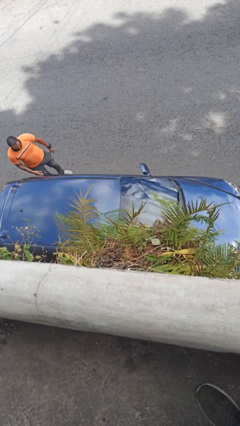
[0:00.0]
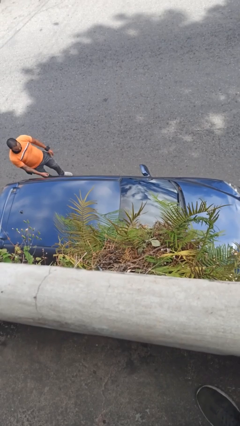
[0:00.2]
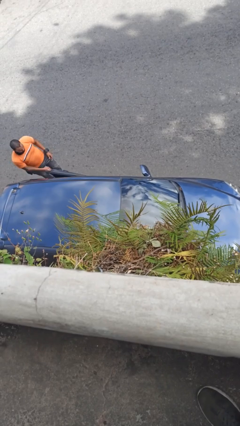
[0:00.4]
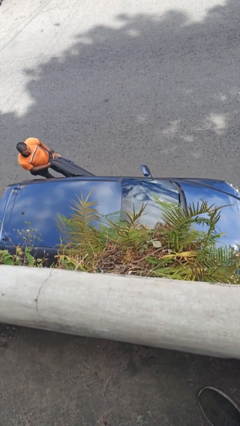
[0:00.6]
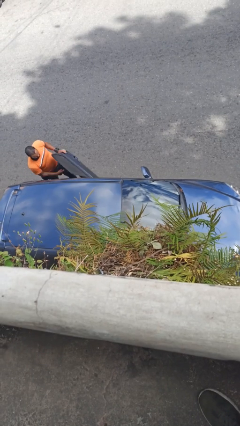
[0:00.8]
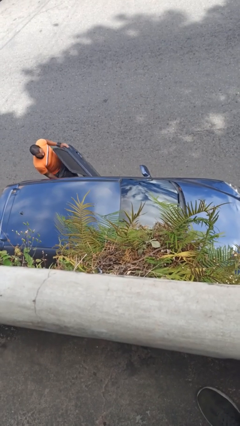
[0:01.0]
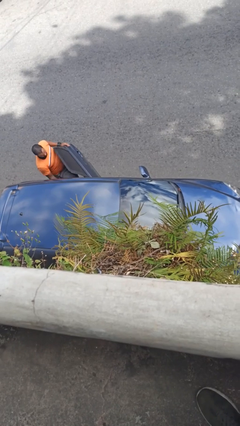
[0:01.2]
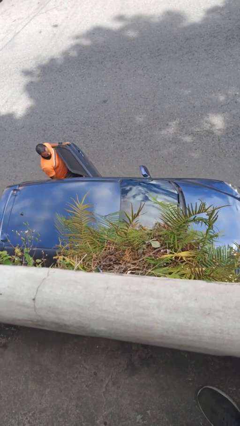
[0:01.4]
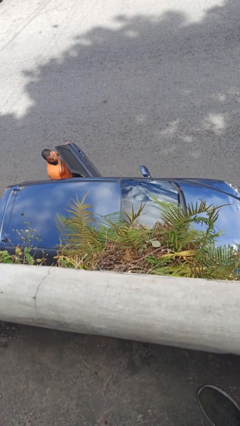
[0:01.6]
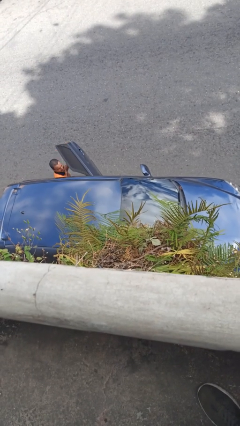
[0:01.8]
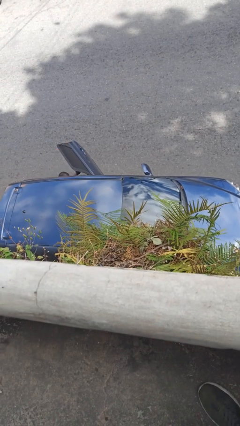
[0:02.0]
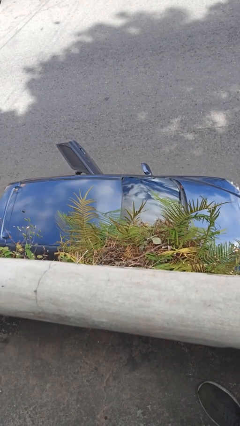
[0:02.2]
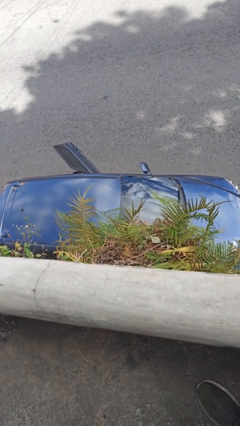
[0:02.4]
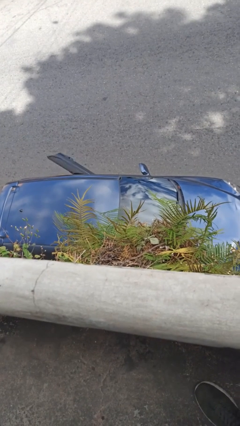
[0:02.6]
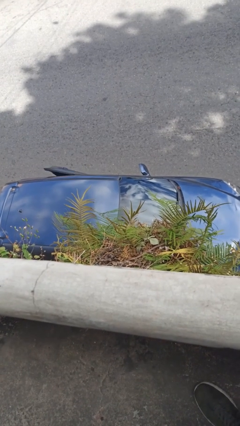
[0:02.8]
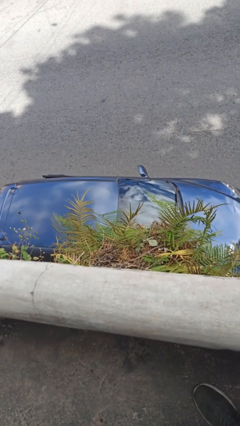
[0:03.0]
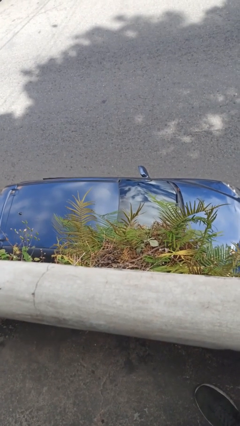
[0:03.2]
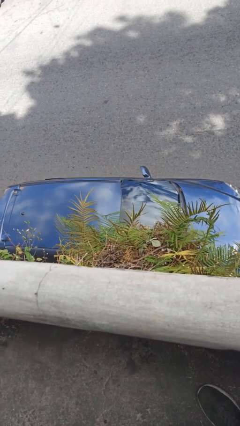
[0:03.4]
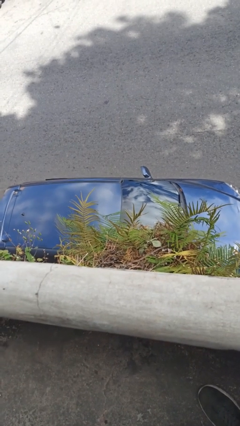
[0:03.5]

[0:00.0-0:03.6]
car picks up person

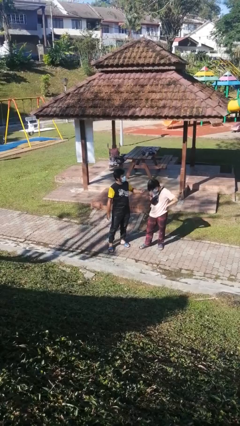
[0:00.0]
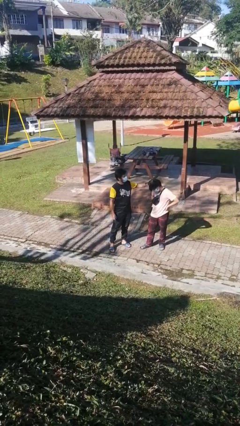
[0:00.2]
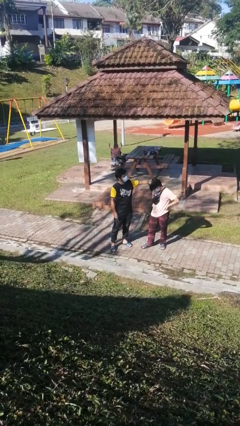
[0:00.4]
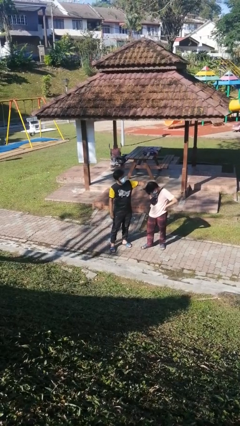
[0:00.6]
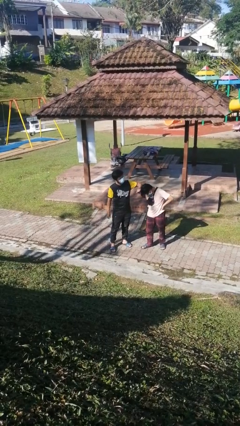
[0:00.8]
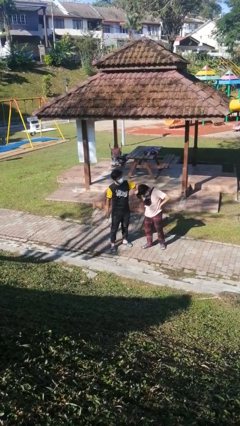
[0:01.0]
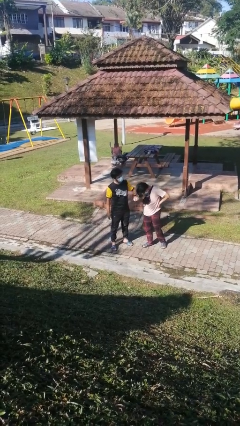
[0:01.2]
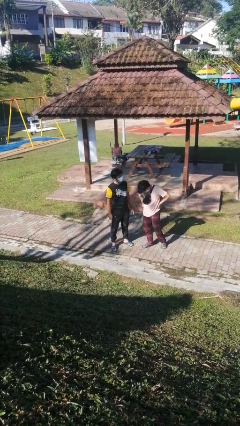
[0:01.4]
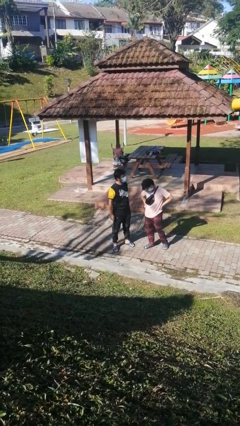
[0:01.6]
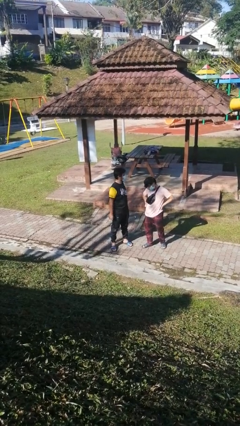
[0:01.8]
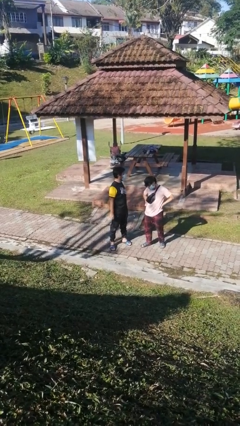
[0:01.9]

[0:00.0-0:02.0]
person grabs person by hair

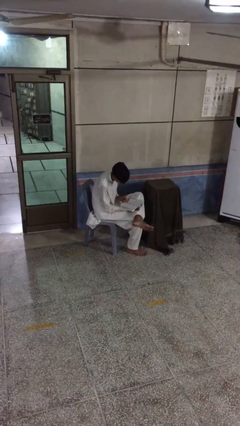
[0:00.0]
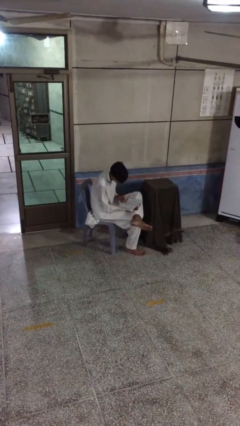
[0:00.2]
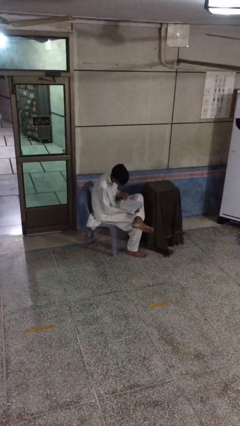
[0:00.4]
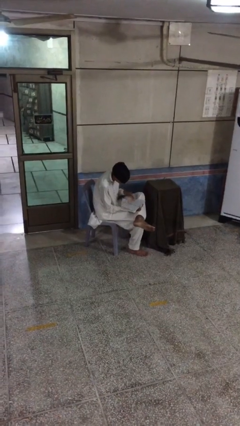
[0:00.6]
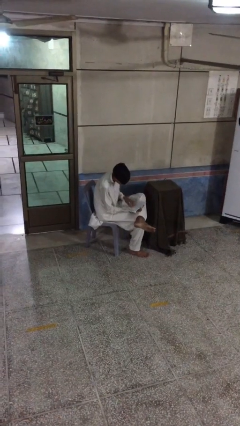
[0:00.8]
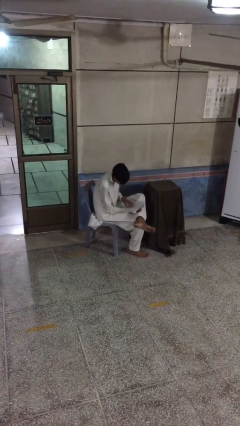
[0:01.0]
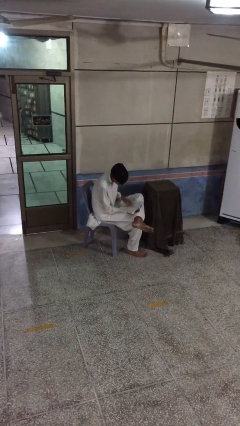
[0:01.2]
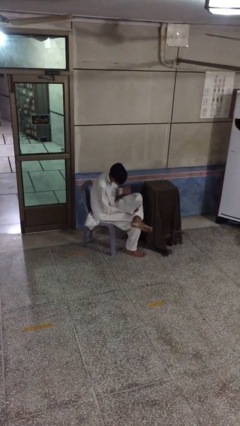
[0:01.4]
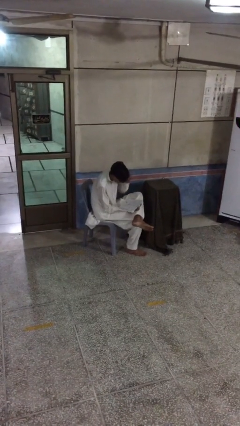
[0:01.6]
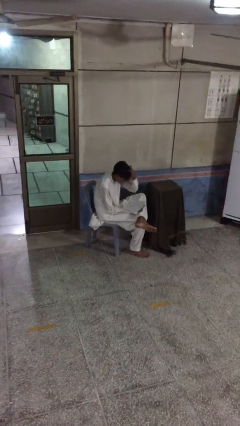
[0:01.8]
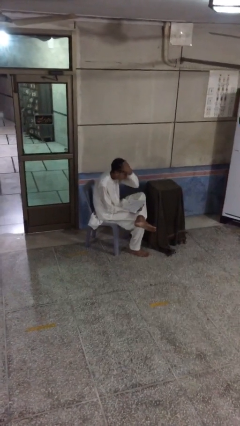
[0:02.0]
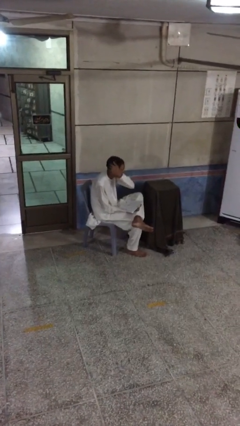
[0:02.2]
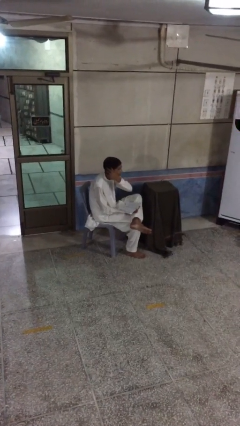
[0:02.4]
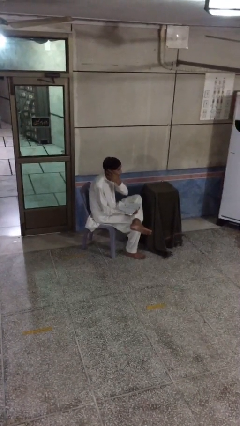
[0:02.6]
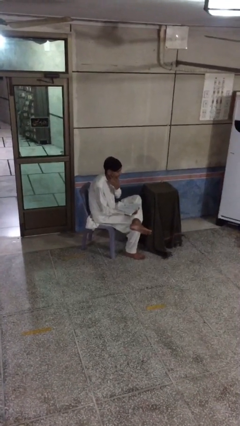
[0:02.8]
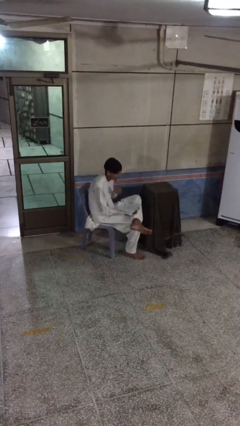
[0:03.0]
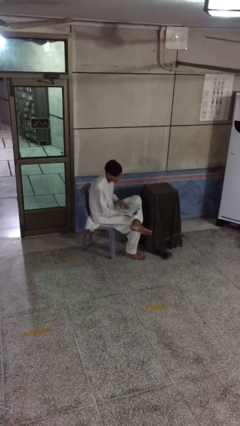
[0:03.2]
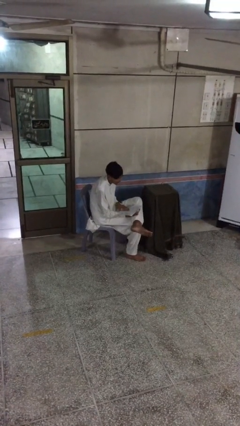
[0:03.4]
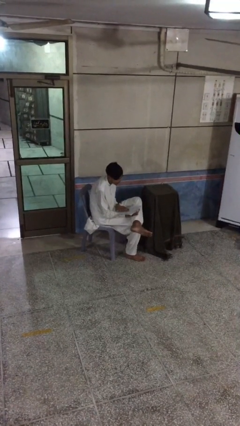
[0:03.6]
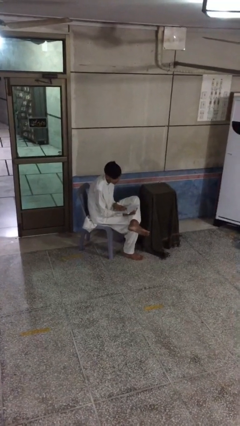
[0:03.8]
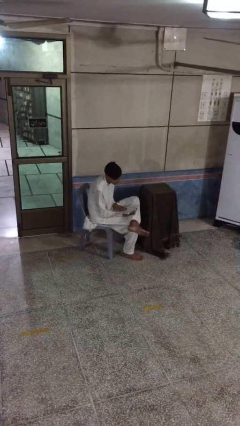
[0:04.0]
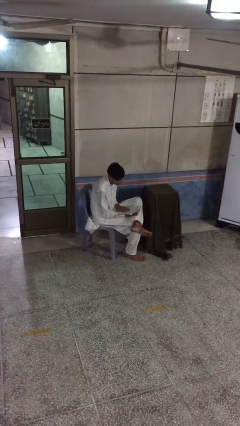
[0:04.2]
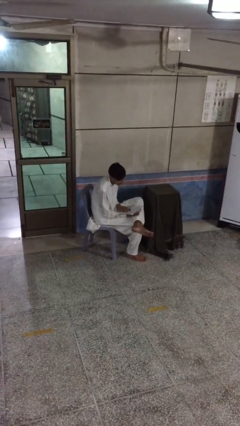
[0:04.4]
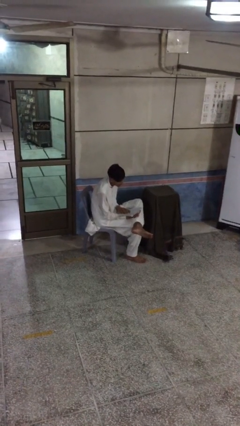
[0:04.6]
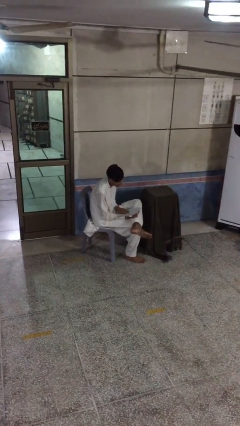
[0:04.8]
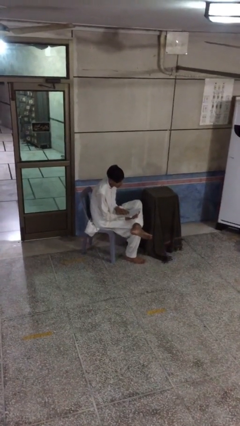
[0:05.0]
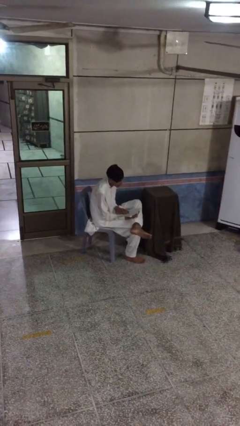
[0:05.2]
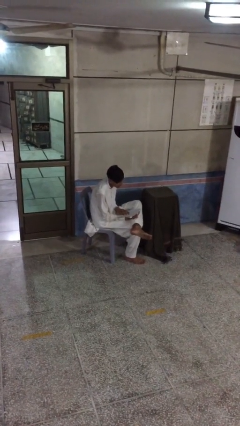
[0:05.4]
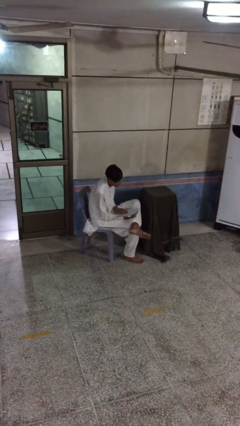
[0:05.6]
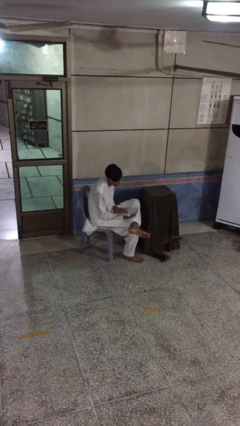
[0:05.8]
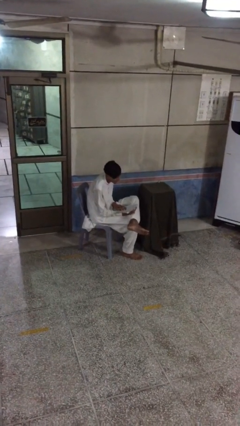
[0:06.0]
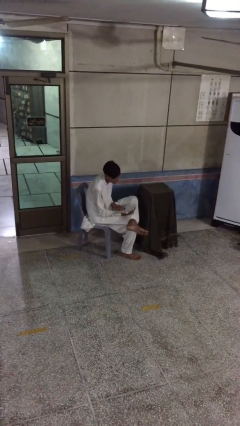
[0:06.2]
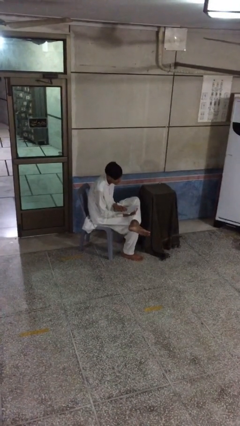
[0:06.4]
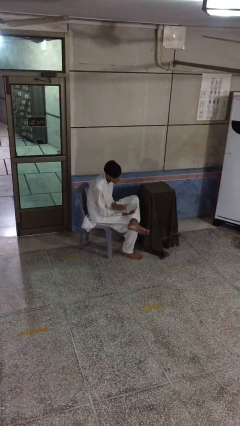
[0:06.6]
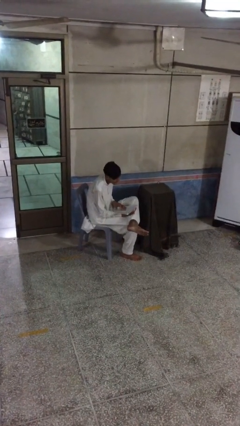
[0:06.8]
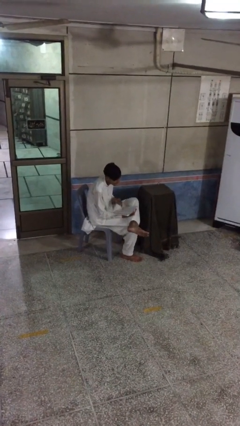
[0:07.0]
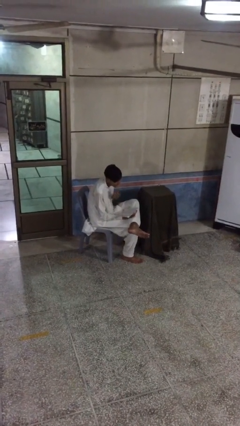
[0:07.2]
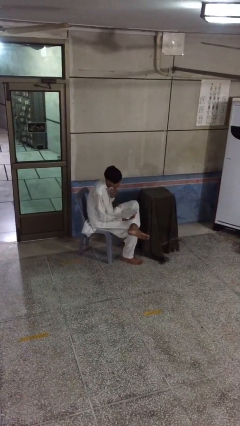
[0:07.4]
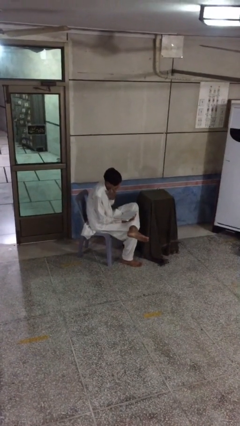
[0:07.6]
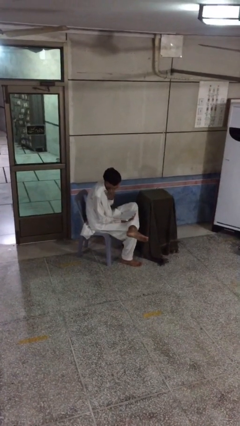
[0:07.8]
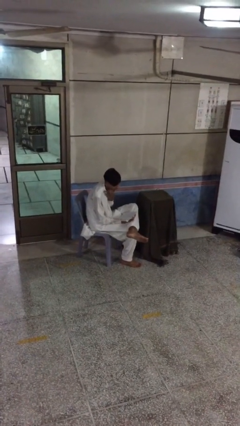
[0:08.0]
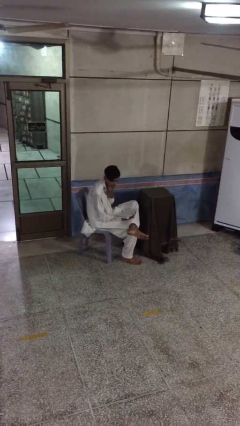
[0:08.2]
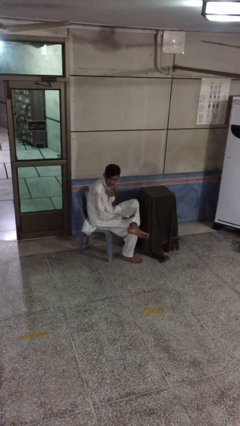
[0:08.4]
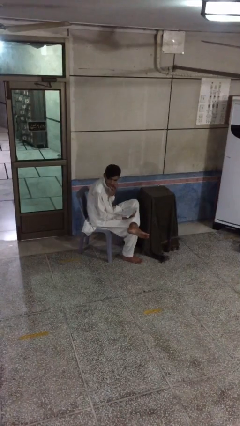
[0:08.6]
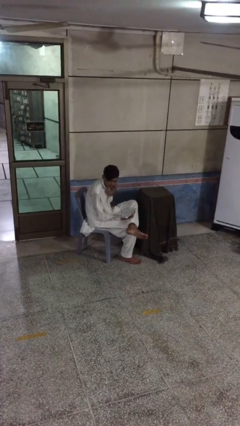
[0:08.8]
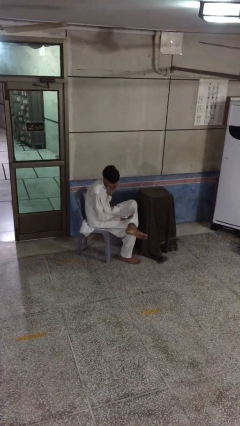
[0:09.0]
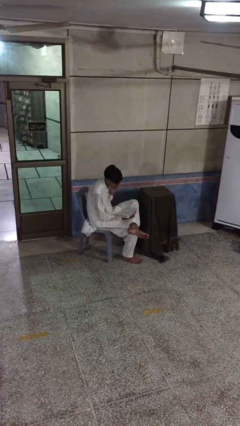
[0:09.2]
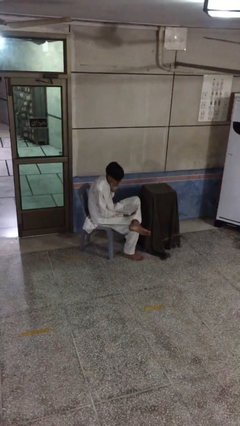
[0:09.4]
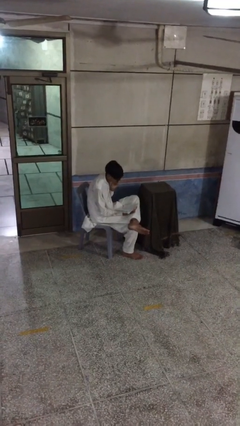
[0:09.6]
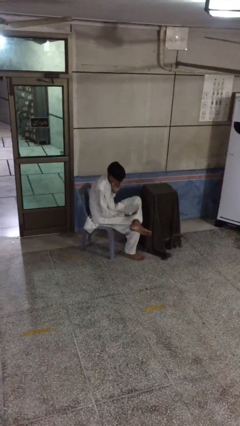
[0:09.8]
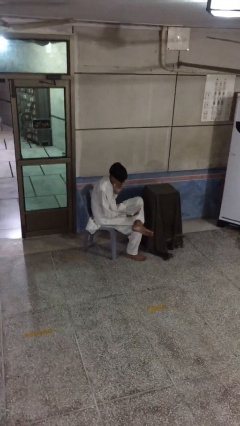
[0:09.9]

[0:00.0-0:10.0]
person reads document

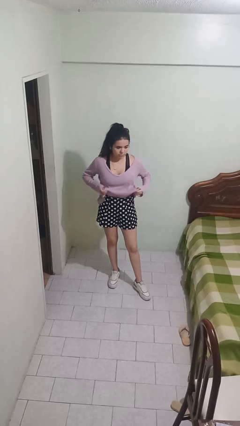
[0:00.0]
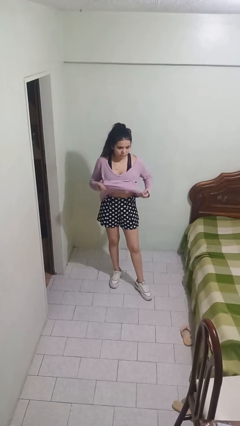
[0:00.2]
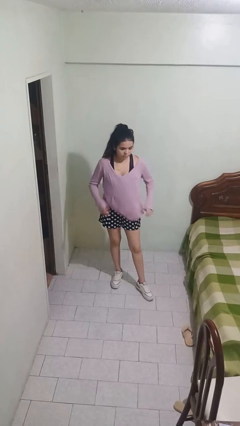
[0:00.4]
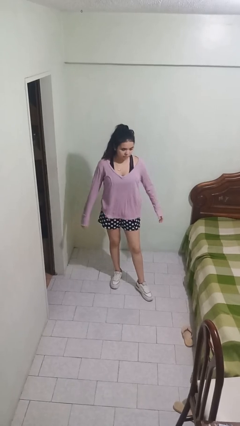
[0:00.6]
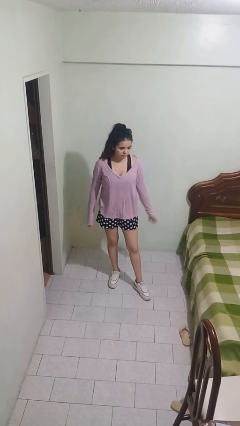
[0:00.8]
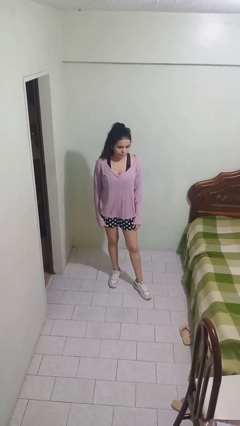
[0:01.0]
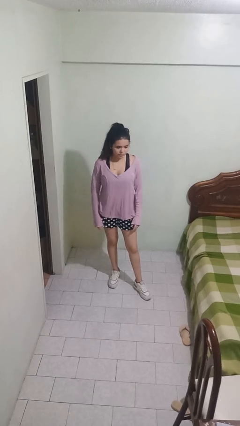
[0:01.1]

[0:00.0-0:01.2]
person untucks shirt

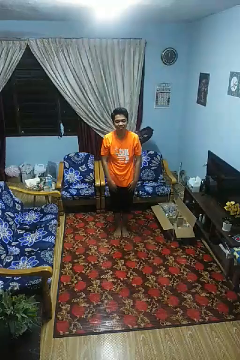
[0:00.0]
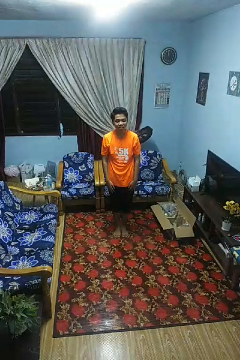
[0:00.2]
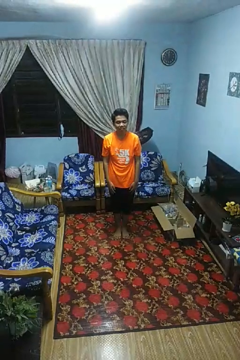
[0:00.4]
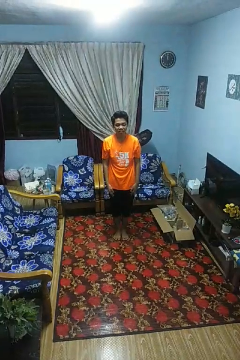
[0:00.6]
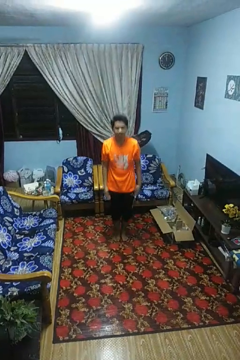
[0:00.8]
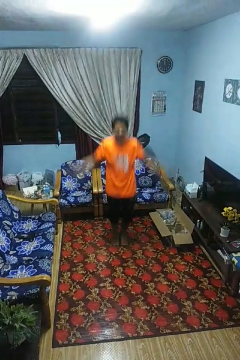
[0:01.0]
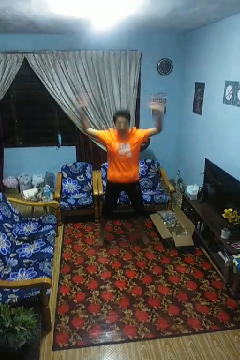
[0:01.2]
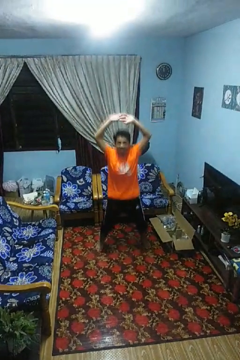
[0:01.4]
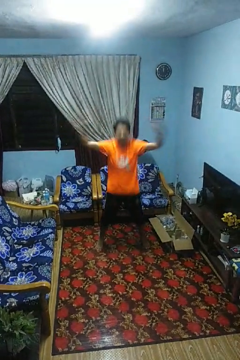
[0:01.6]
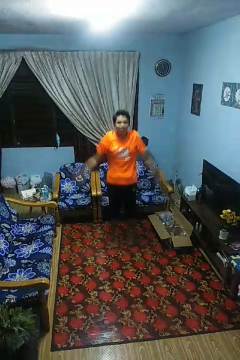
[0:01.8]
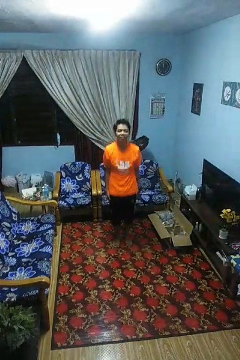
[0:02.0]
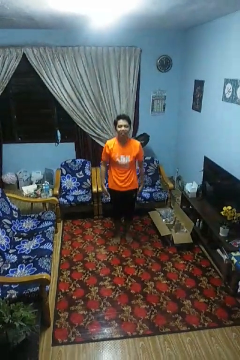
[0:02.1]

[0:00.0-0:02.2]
person exercises with jumping jacks
